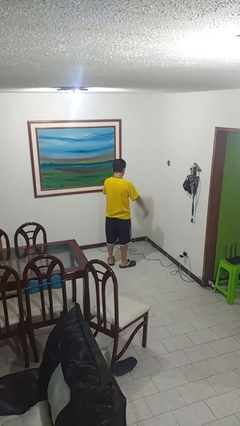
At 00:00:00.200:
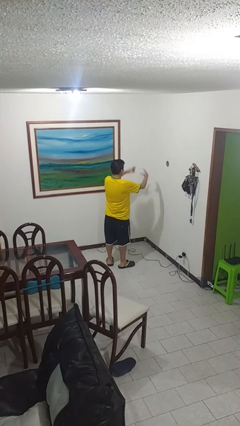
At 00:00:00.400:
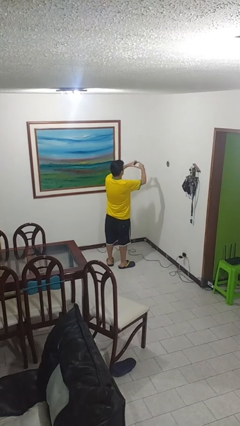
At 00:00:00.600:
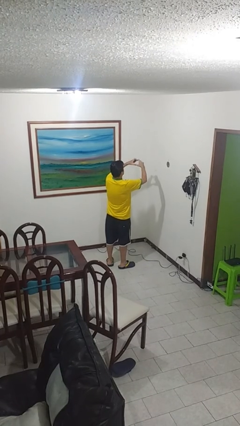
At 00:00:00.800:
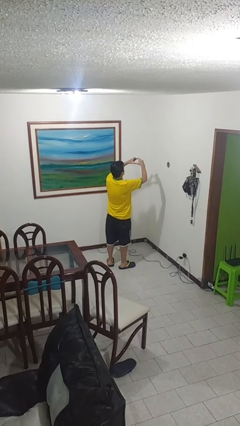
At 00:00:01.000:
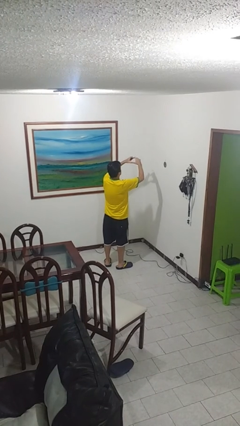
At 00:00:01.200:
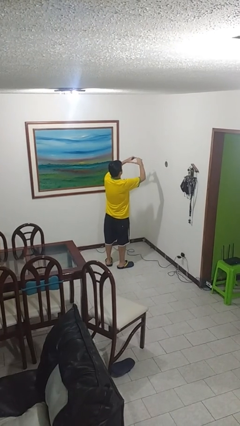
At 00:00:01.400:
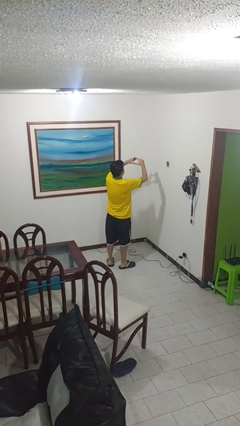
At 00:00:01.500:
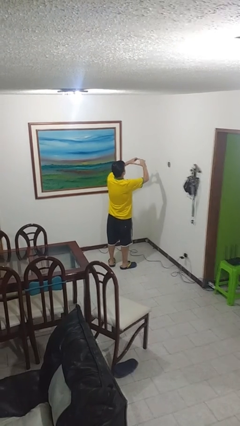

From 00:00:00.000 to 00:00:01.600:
person gestures heart

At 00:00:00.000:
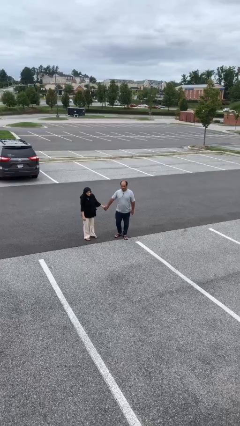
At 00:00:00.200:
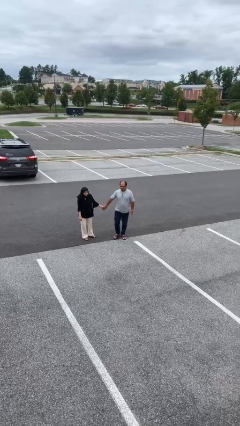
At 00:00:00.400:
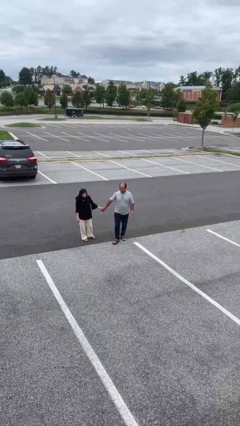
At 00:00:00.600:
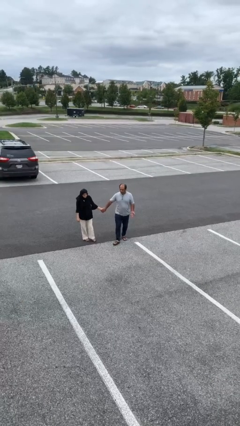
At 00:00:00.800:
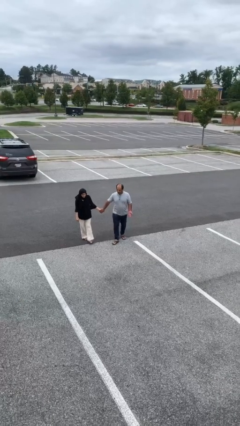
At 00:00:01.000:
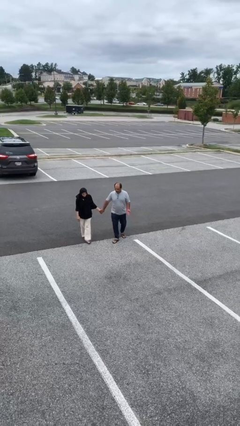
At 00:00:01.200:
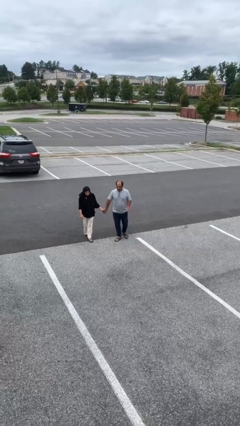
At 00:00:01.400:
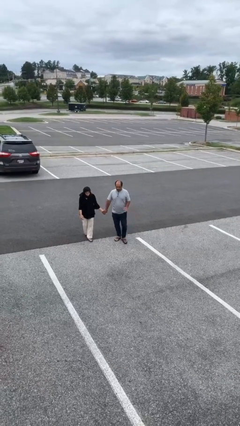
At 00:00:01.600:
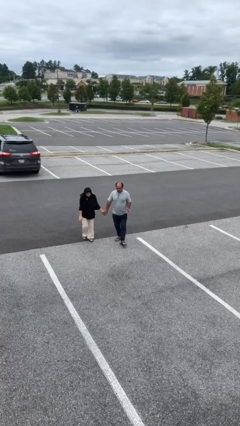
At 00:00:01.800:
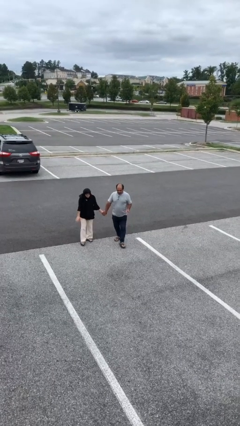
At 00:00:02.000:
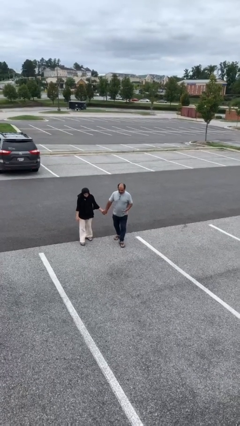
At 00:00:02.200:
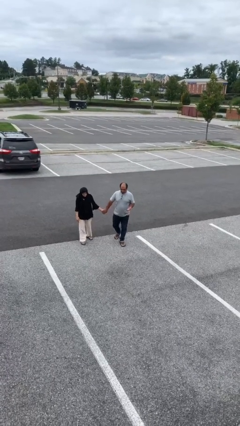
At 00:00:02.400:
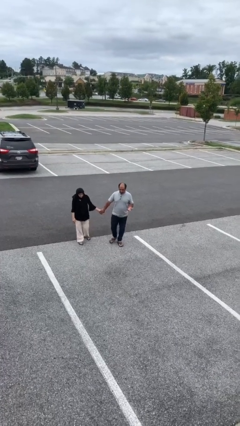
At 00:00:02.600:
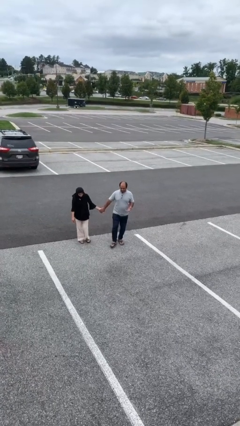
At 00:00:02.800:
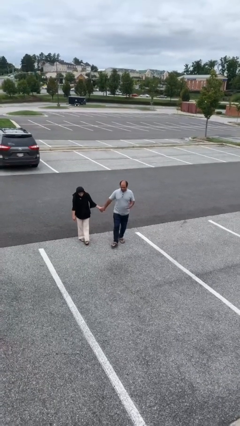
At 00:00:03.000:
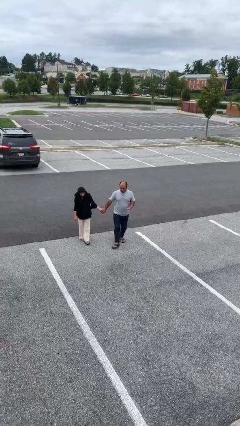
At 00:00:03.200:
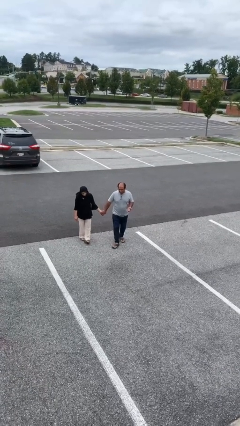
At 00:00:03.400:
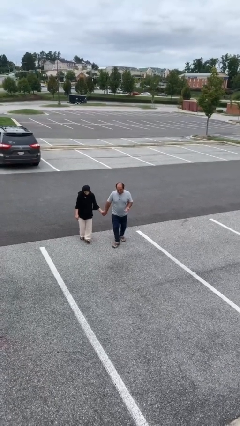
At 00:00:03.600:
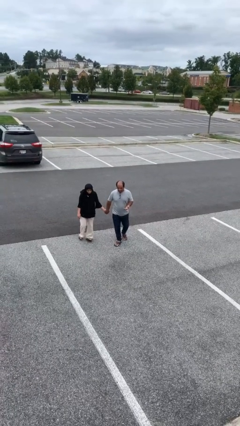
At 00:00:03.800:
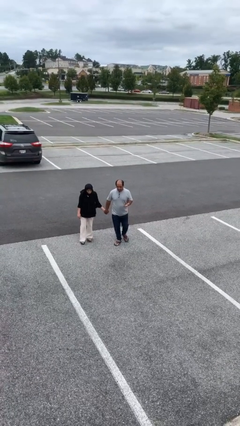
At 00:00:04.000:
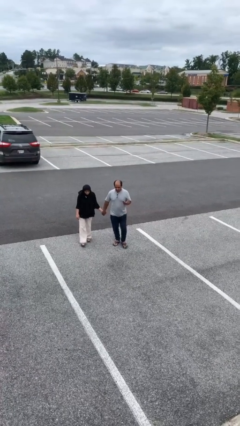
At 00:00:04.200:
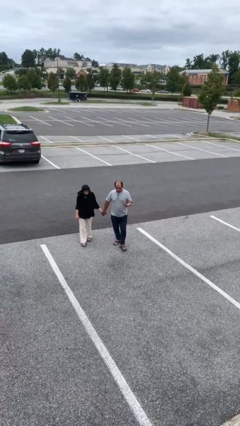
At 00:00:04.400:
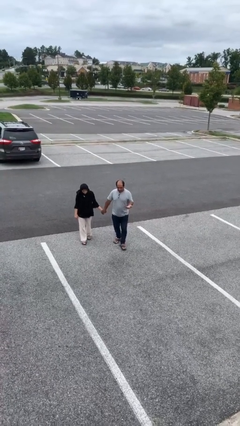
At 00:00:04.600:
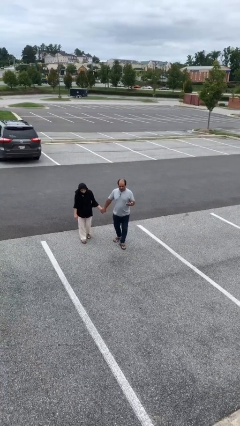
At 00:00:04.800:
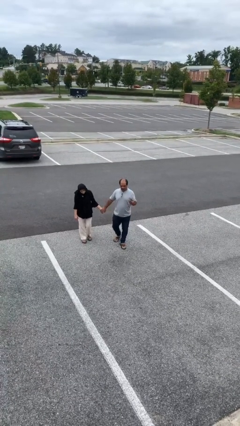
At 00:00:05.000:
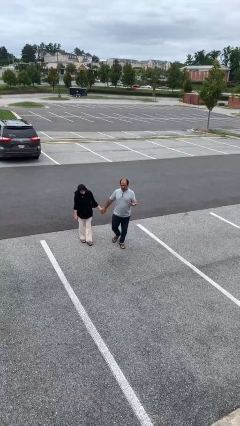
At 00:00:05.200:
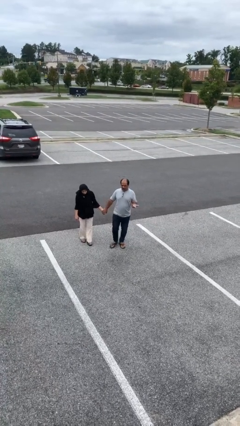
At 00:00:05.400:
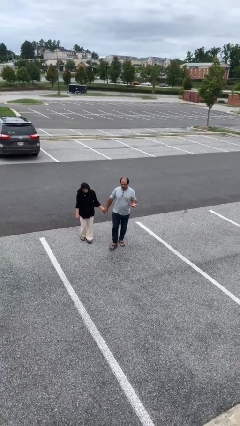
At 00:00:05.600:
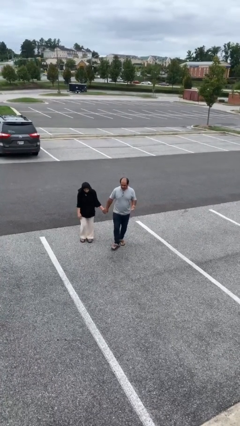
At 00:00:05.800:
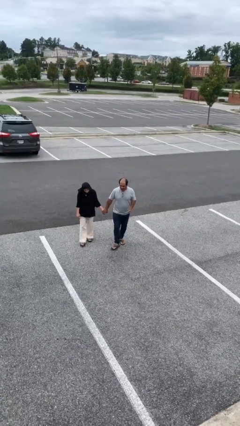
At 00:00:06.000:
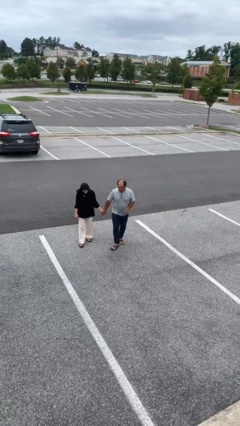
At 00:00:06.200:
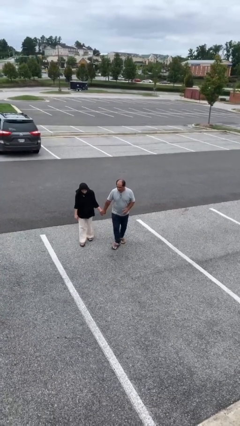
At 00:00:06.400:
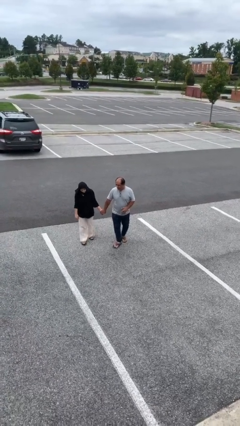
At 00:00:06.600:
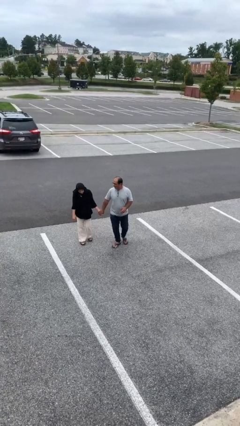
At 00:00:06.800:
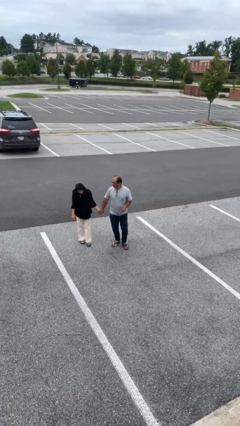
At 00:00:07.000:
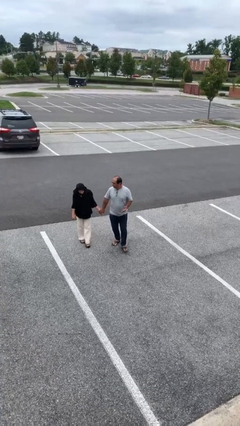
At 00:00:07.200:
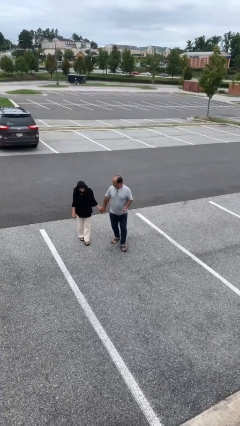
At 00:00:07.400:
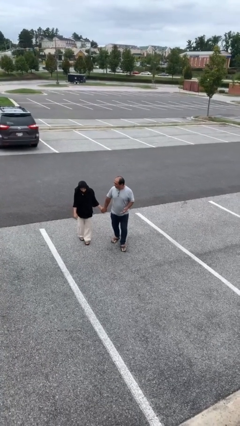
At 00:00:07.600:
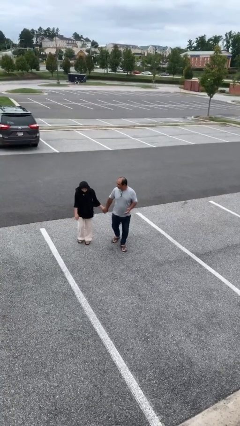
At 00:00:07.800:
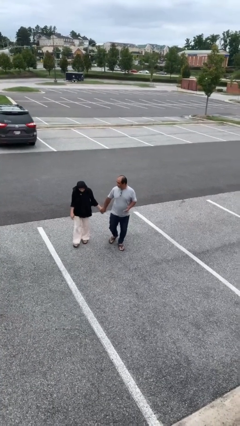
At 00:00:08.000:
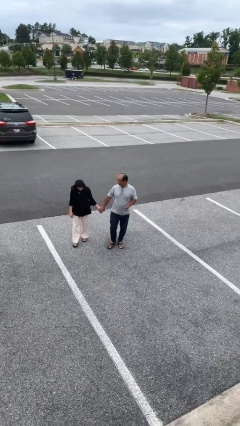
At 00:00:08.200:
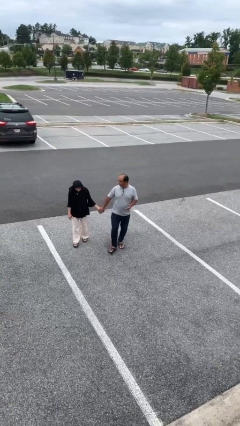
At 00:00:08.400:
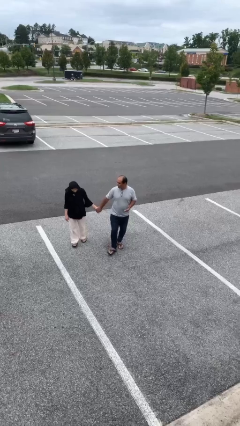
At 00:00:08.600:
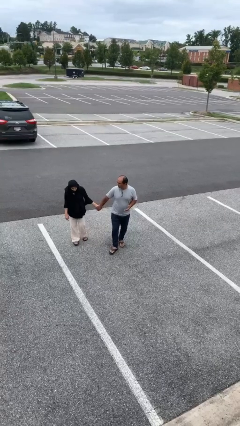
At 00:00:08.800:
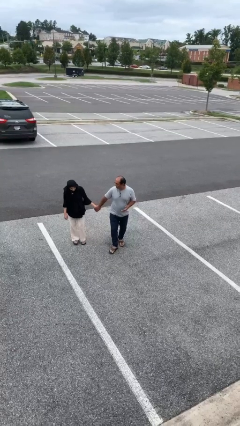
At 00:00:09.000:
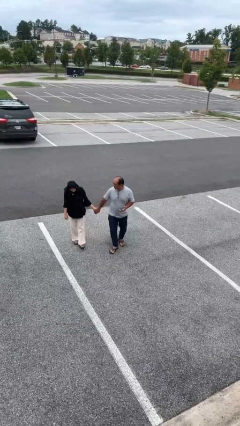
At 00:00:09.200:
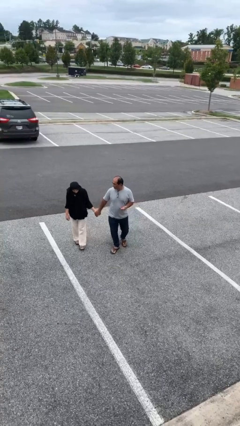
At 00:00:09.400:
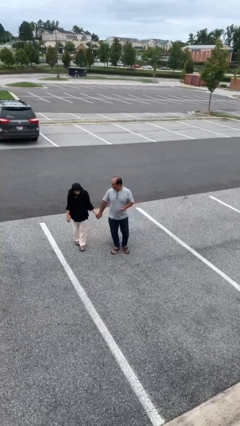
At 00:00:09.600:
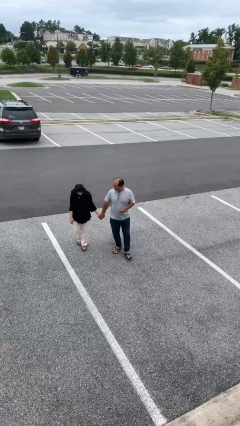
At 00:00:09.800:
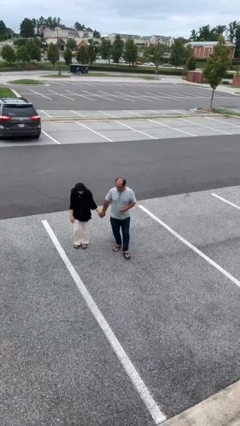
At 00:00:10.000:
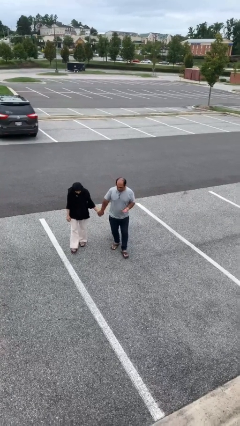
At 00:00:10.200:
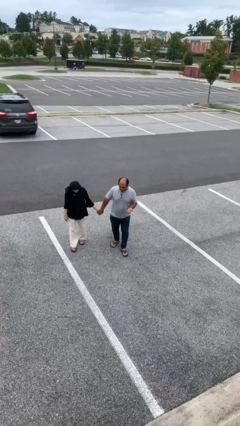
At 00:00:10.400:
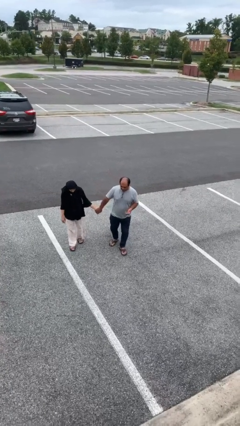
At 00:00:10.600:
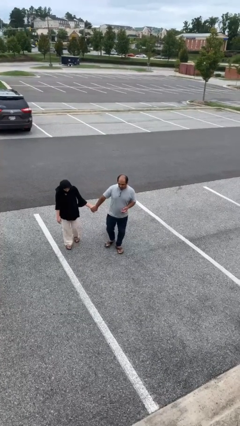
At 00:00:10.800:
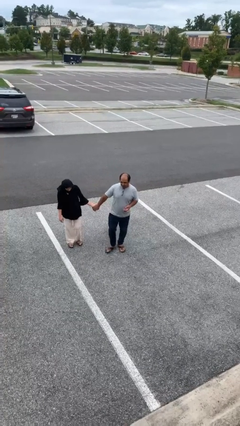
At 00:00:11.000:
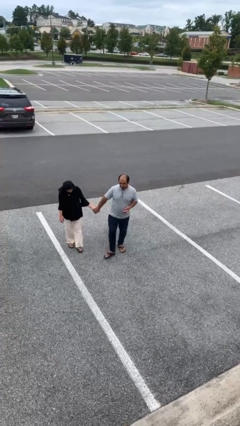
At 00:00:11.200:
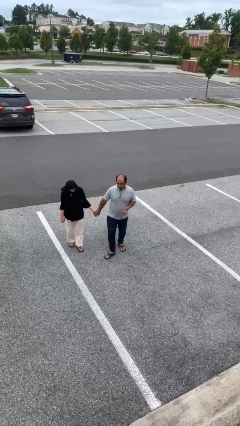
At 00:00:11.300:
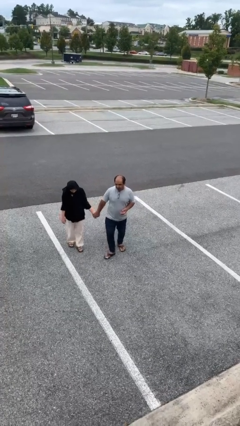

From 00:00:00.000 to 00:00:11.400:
person holds hand

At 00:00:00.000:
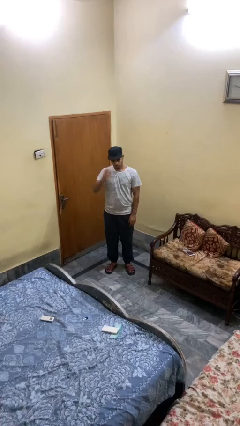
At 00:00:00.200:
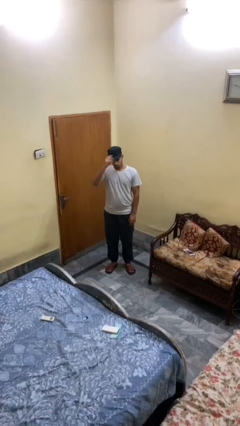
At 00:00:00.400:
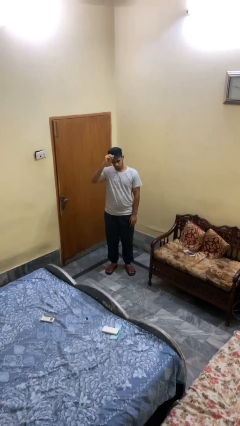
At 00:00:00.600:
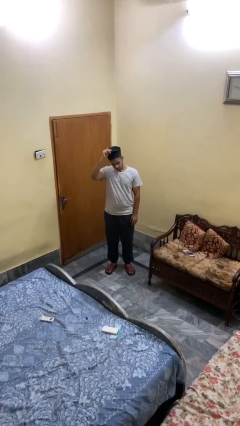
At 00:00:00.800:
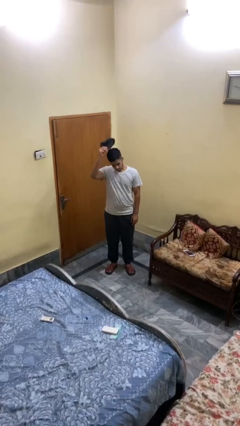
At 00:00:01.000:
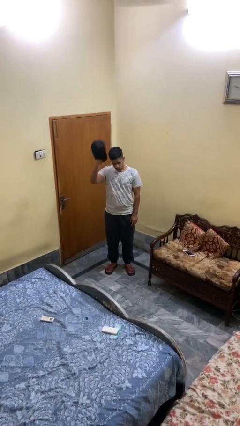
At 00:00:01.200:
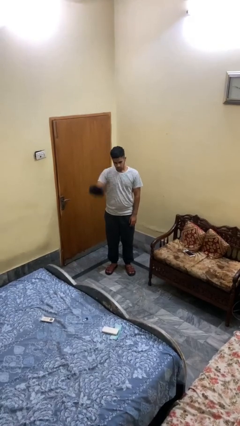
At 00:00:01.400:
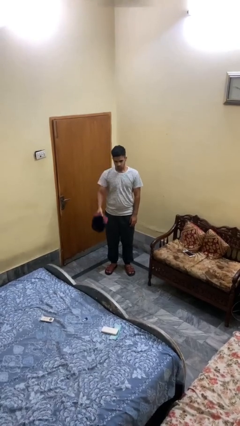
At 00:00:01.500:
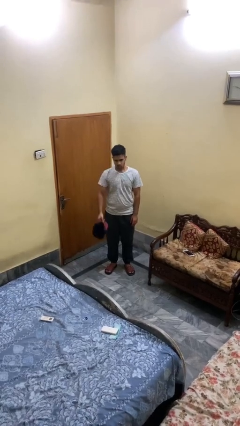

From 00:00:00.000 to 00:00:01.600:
person takes off hat

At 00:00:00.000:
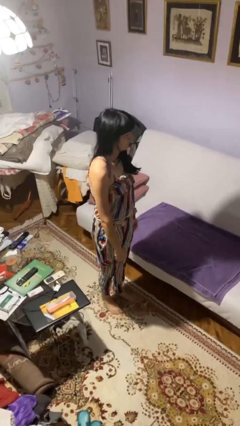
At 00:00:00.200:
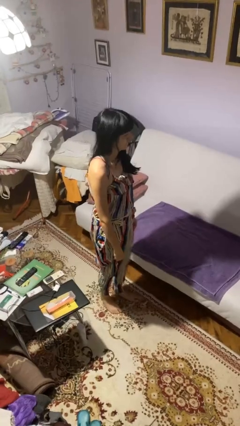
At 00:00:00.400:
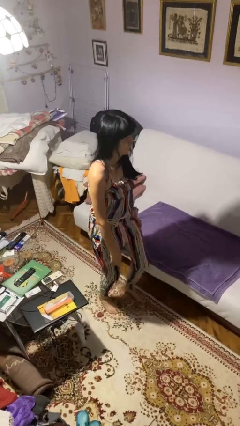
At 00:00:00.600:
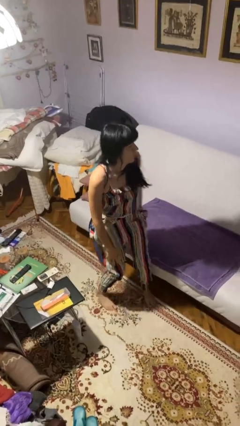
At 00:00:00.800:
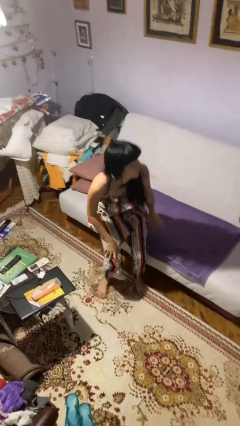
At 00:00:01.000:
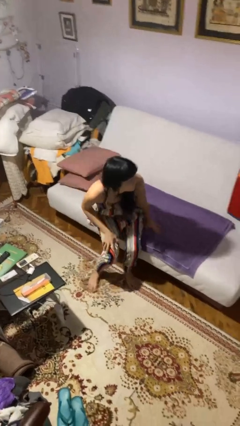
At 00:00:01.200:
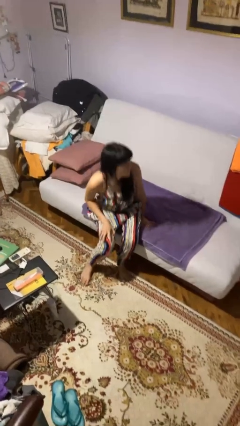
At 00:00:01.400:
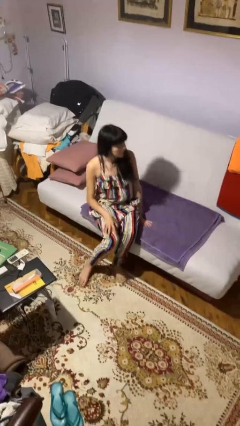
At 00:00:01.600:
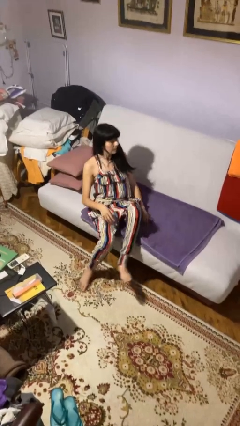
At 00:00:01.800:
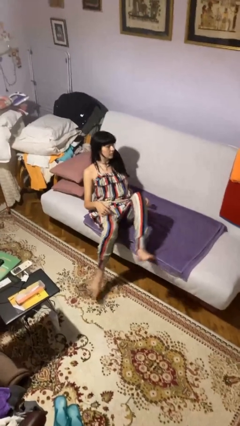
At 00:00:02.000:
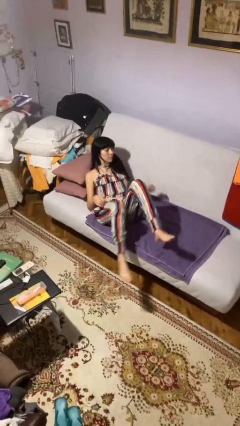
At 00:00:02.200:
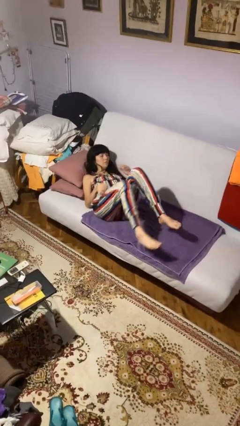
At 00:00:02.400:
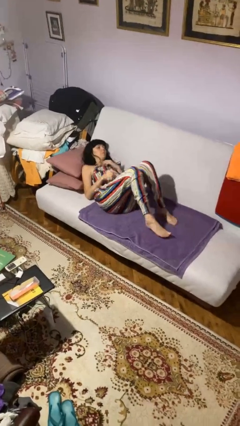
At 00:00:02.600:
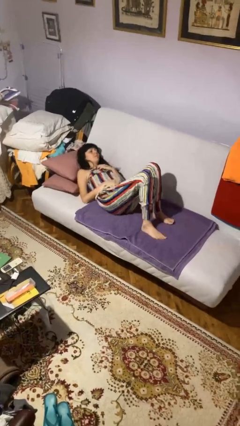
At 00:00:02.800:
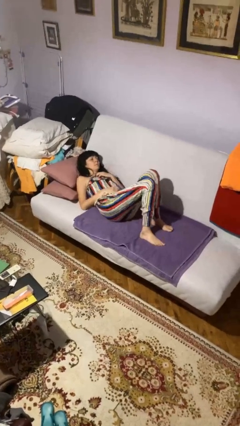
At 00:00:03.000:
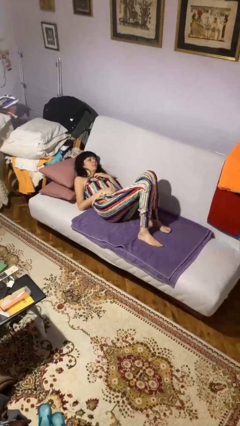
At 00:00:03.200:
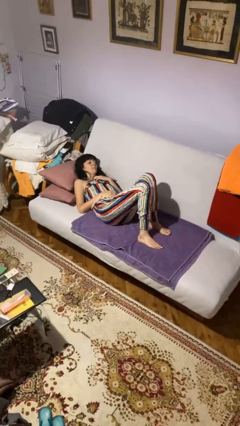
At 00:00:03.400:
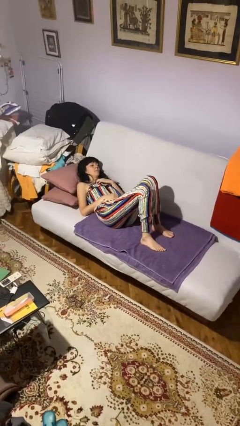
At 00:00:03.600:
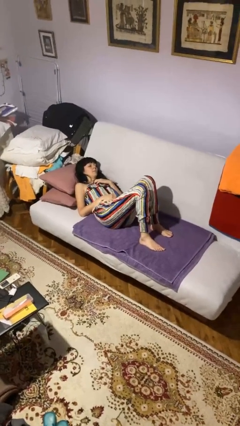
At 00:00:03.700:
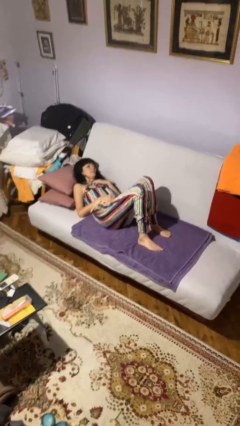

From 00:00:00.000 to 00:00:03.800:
person lies down on bed
